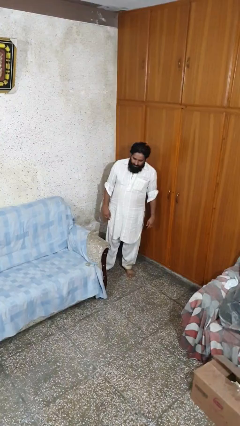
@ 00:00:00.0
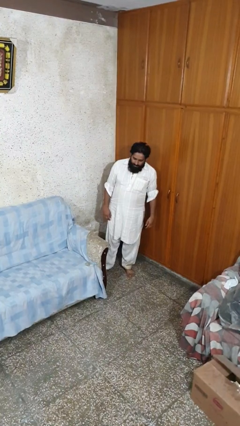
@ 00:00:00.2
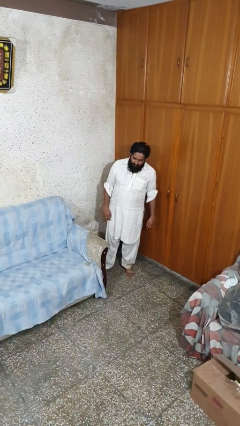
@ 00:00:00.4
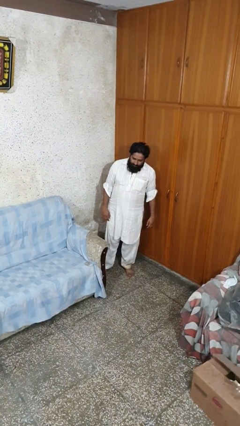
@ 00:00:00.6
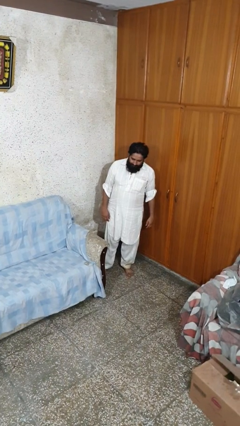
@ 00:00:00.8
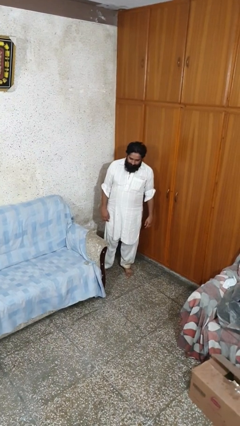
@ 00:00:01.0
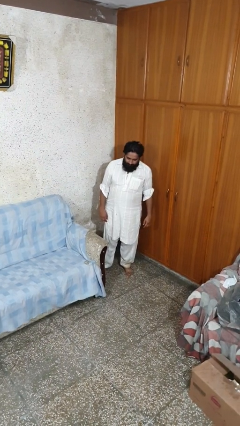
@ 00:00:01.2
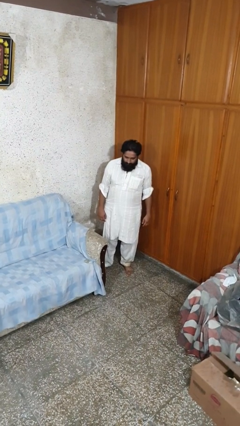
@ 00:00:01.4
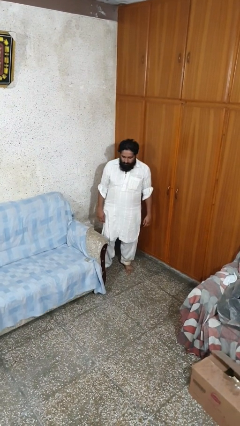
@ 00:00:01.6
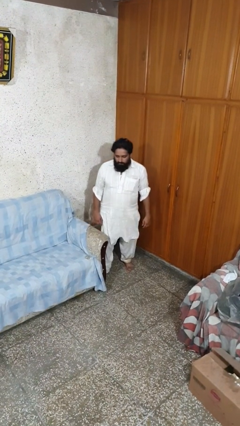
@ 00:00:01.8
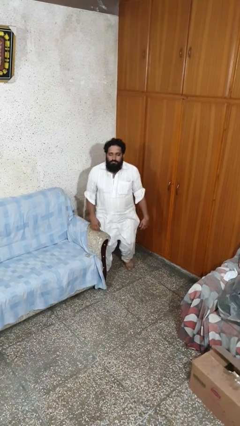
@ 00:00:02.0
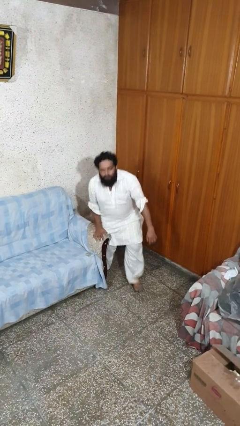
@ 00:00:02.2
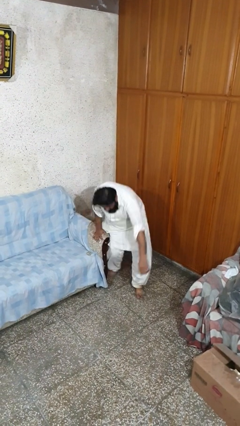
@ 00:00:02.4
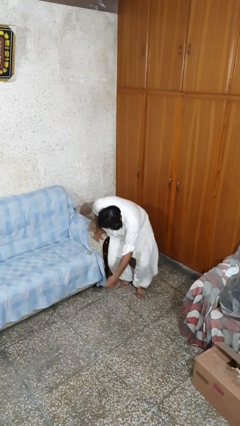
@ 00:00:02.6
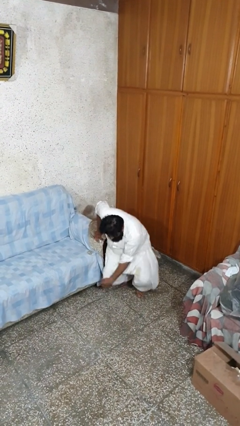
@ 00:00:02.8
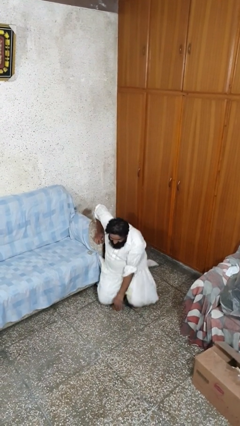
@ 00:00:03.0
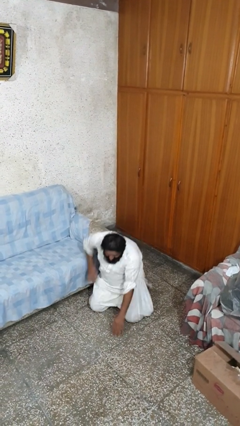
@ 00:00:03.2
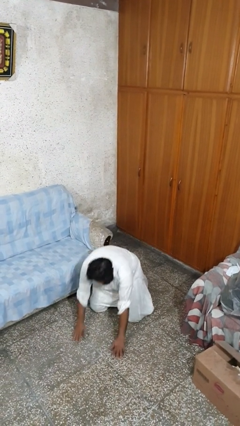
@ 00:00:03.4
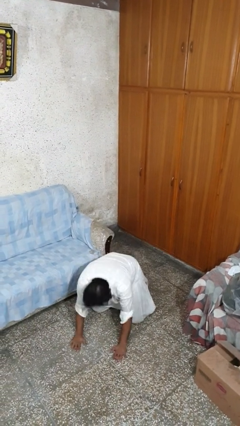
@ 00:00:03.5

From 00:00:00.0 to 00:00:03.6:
person trips on object on floor

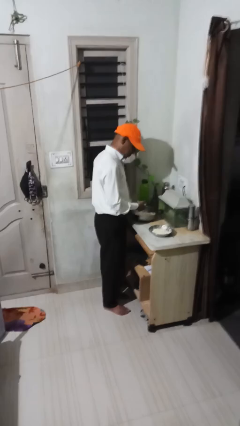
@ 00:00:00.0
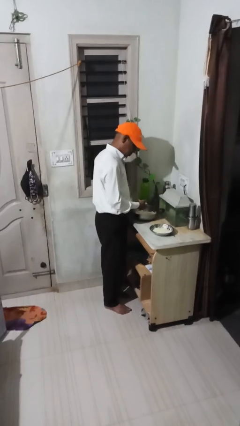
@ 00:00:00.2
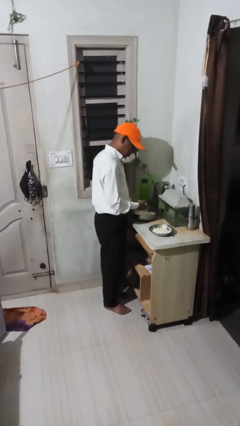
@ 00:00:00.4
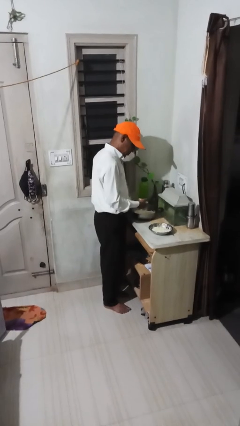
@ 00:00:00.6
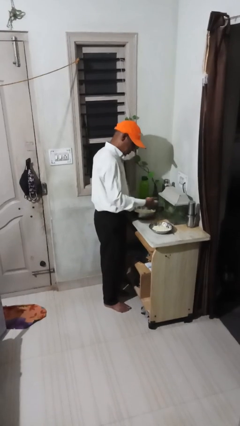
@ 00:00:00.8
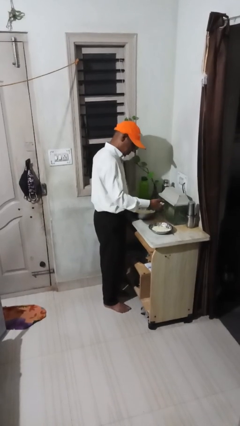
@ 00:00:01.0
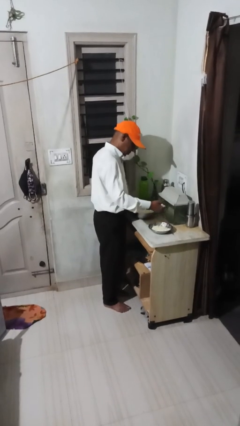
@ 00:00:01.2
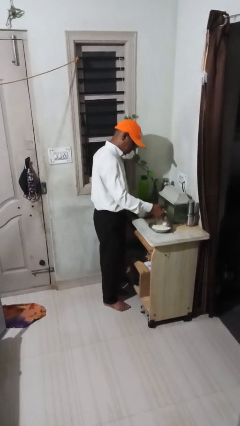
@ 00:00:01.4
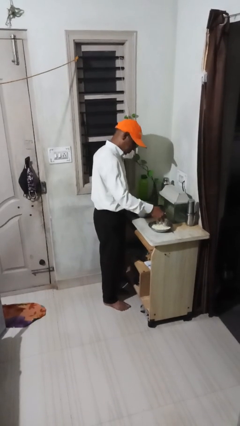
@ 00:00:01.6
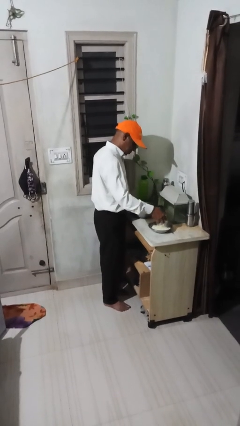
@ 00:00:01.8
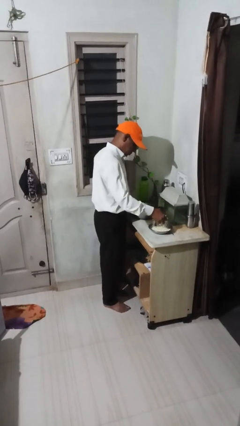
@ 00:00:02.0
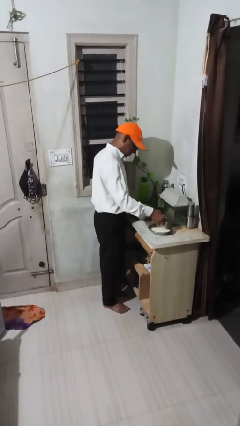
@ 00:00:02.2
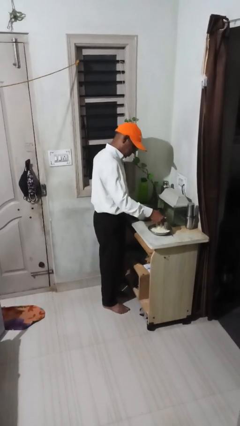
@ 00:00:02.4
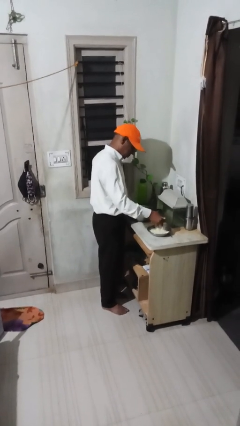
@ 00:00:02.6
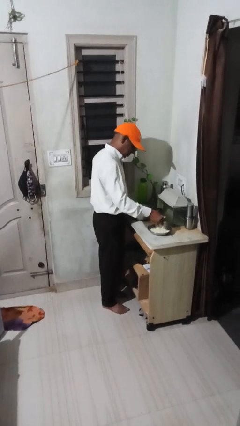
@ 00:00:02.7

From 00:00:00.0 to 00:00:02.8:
person pours into bowl

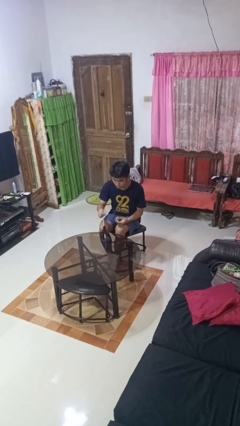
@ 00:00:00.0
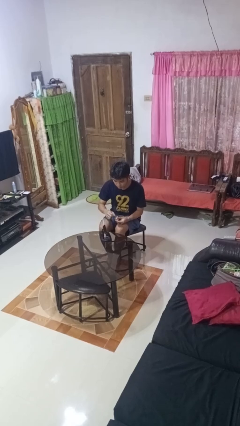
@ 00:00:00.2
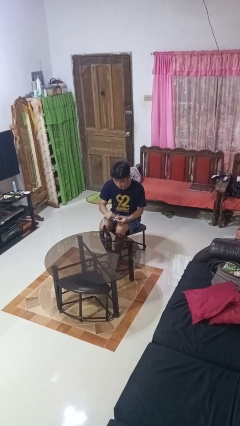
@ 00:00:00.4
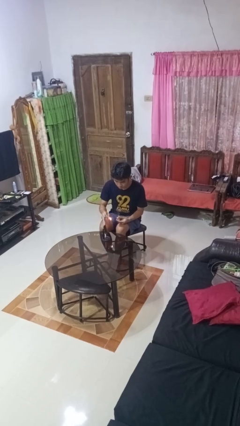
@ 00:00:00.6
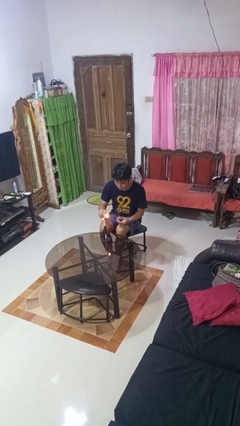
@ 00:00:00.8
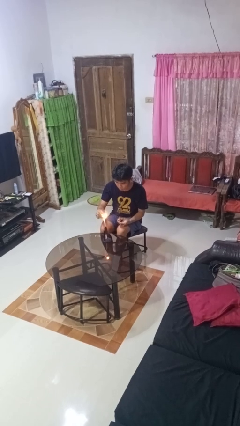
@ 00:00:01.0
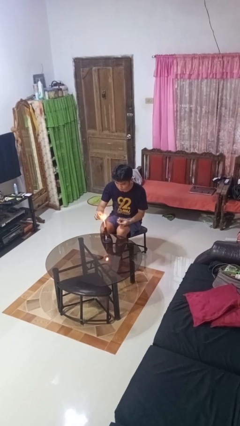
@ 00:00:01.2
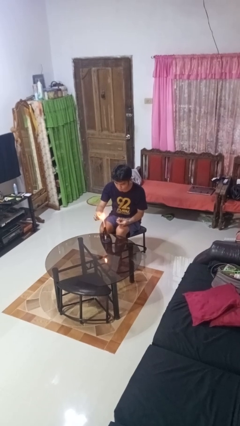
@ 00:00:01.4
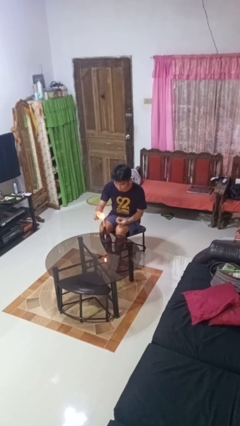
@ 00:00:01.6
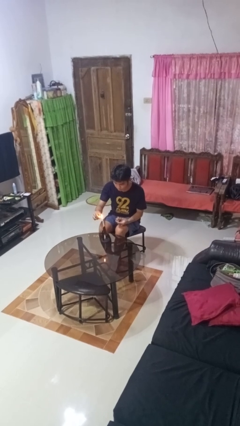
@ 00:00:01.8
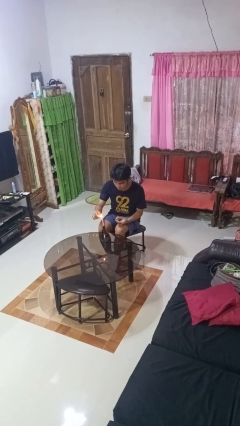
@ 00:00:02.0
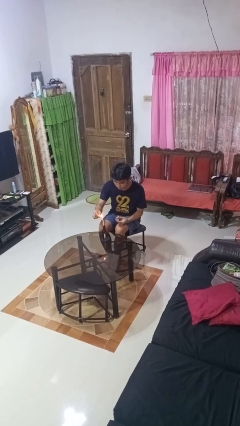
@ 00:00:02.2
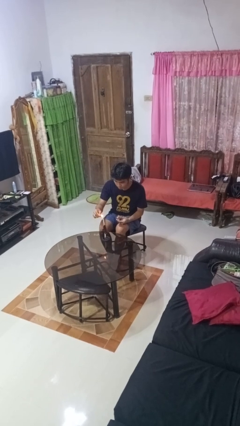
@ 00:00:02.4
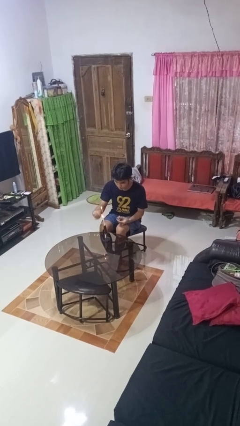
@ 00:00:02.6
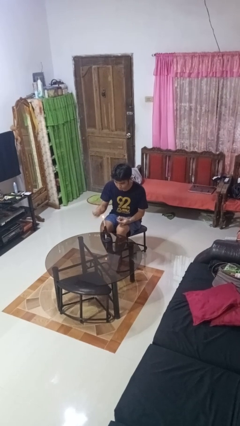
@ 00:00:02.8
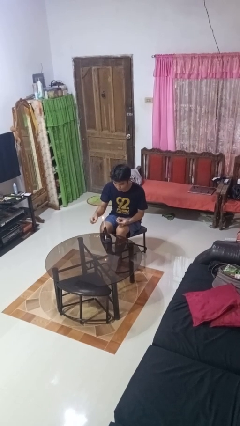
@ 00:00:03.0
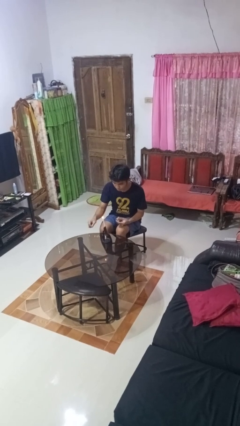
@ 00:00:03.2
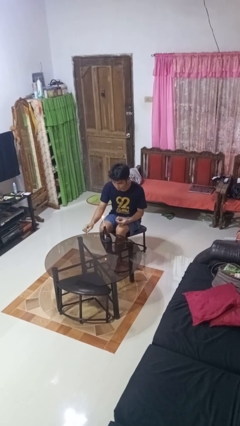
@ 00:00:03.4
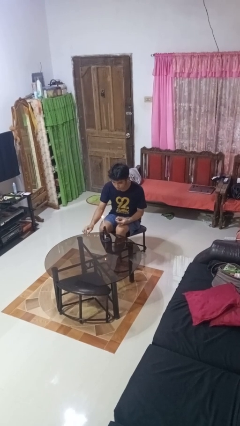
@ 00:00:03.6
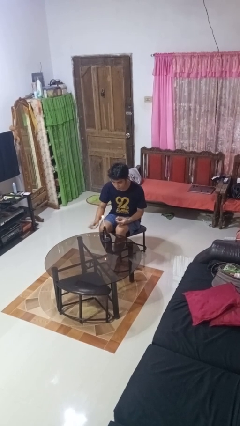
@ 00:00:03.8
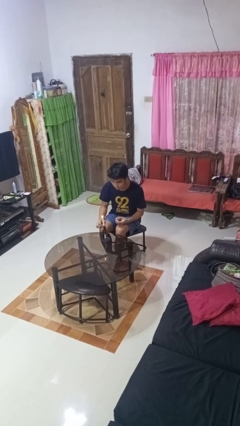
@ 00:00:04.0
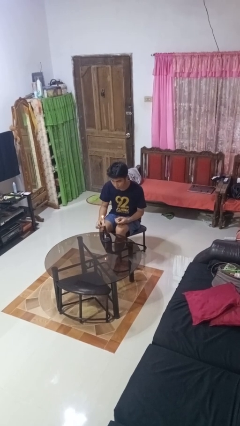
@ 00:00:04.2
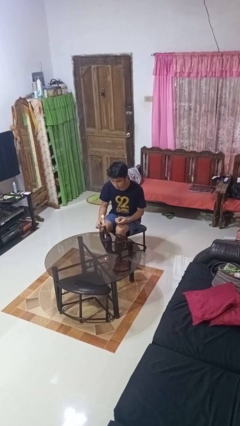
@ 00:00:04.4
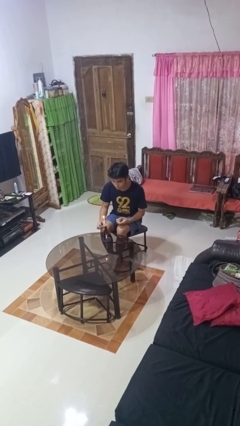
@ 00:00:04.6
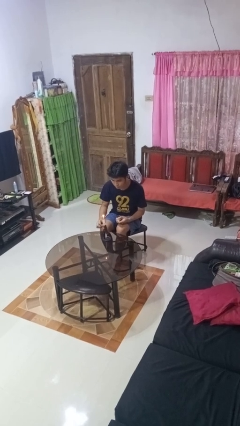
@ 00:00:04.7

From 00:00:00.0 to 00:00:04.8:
person lights candle

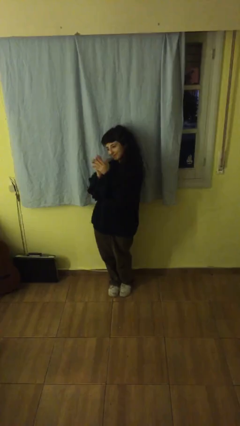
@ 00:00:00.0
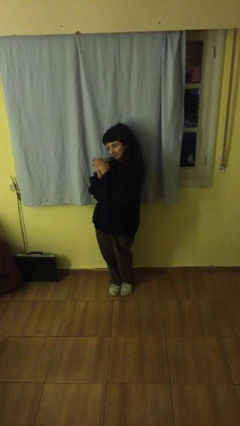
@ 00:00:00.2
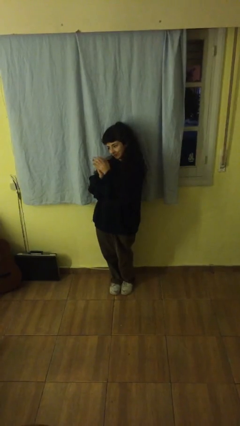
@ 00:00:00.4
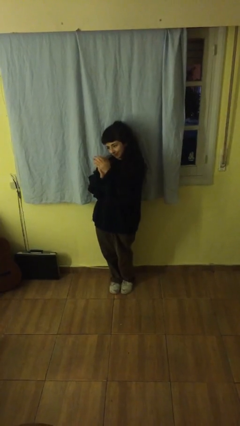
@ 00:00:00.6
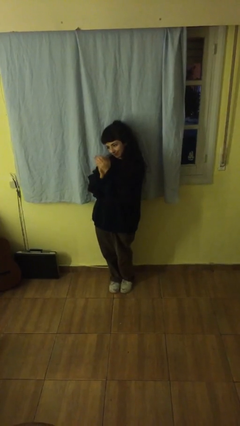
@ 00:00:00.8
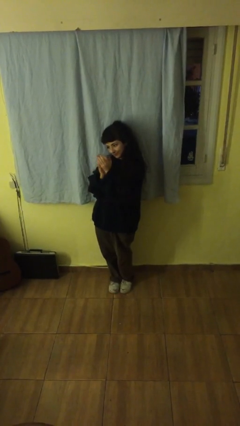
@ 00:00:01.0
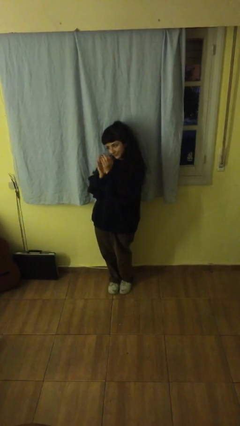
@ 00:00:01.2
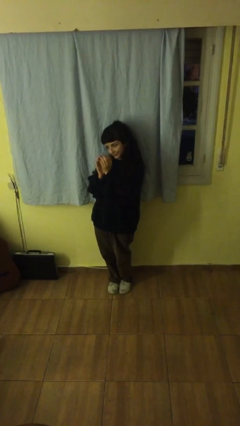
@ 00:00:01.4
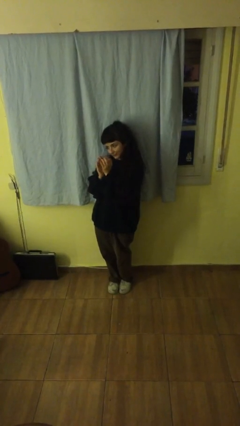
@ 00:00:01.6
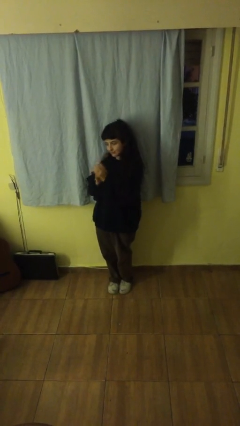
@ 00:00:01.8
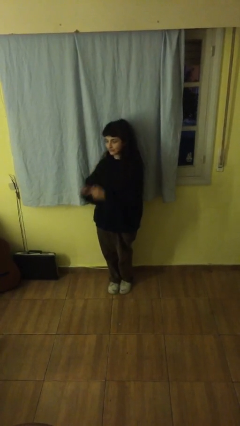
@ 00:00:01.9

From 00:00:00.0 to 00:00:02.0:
person claps hands

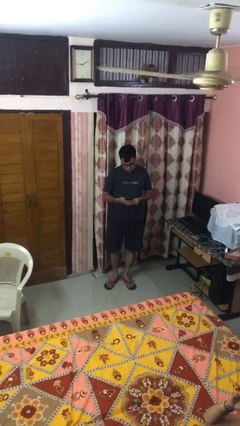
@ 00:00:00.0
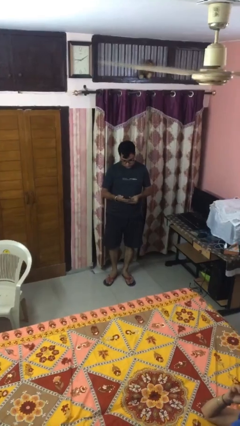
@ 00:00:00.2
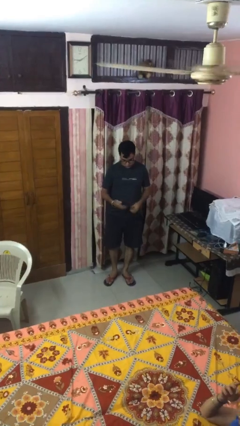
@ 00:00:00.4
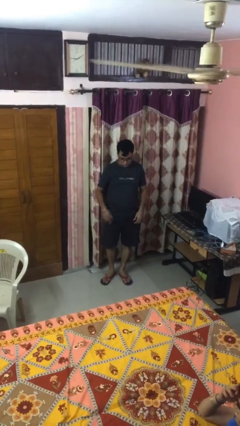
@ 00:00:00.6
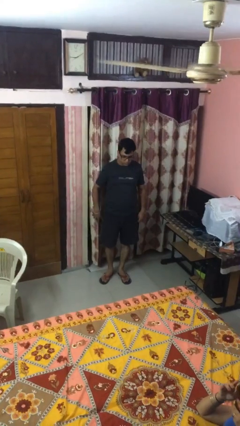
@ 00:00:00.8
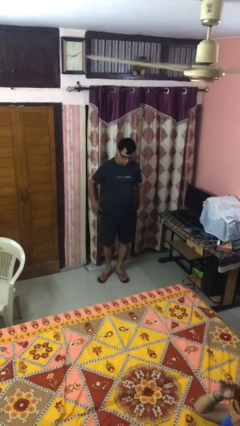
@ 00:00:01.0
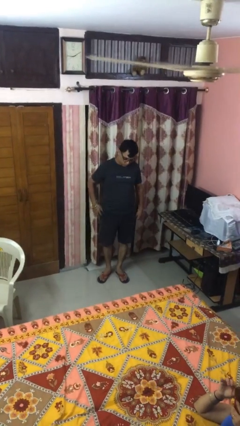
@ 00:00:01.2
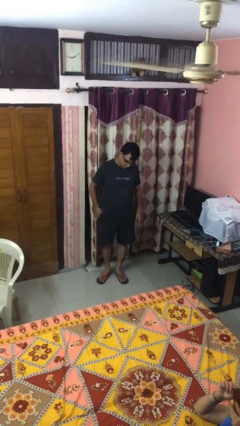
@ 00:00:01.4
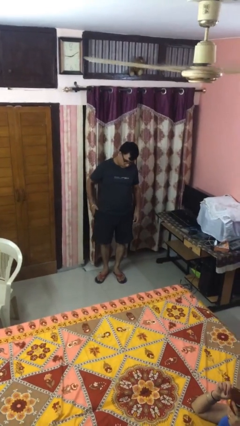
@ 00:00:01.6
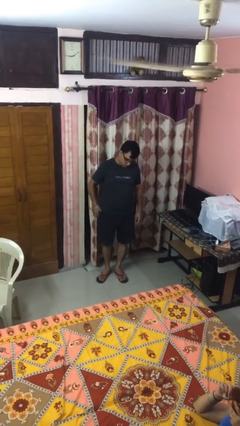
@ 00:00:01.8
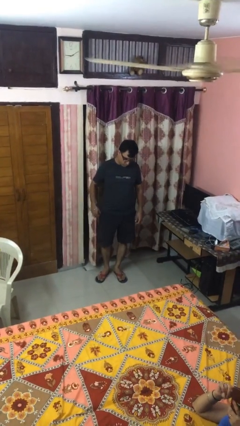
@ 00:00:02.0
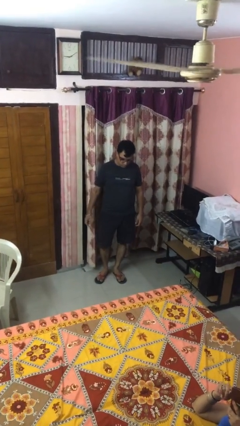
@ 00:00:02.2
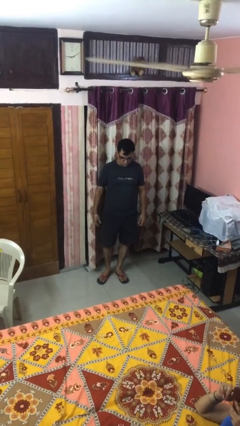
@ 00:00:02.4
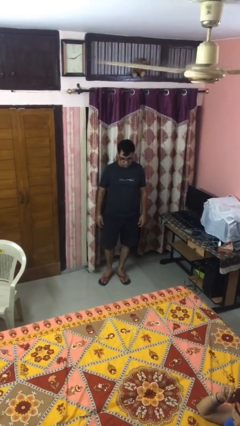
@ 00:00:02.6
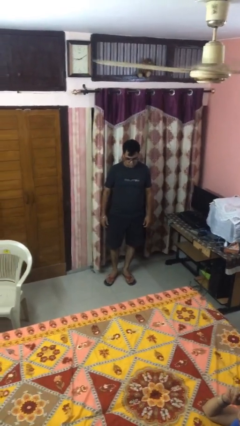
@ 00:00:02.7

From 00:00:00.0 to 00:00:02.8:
person puts phone into pocket

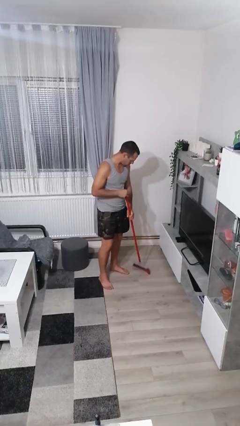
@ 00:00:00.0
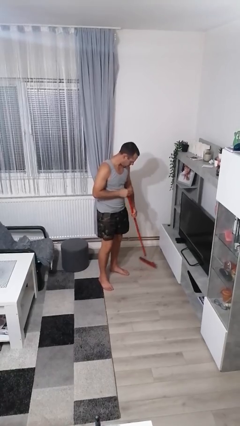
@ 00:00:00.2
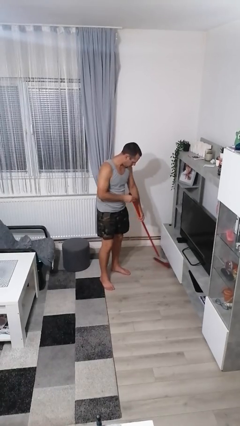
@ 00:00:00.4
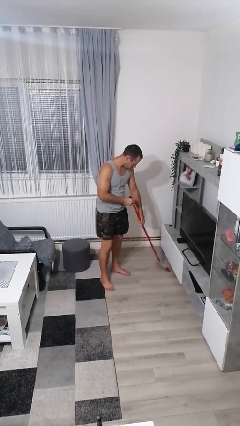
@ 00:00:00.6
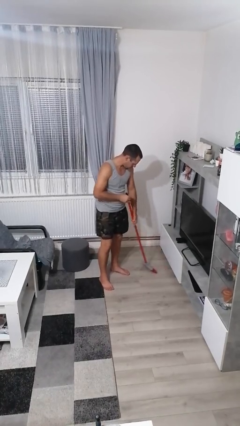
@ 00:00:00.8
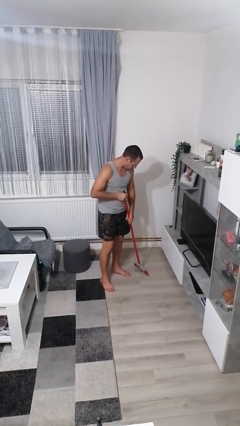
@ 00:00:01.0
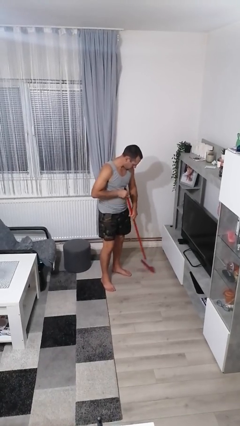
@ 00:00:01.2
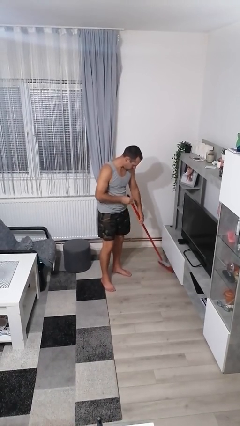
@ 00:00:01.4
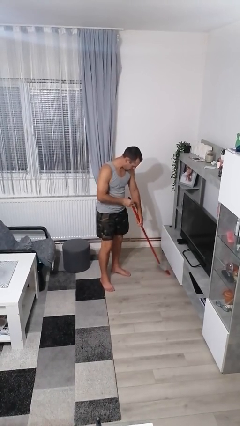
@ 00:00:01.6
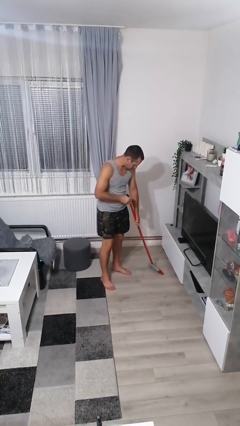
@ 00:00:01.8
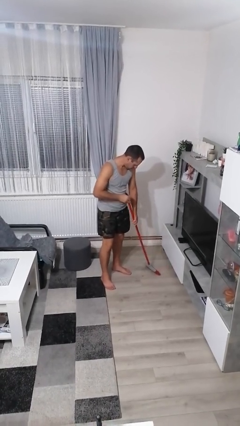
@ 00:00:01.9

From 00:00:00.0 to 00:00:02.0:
person sweeps floor
